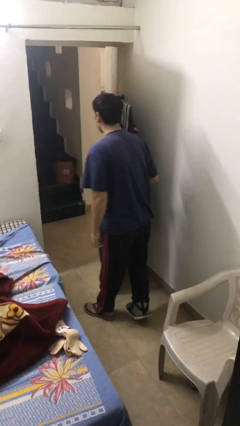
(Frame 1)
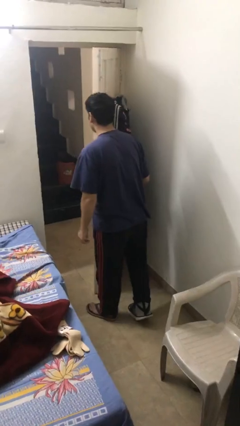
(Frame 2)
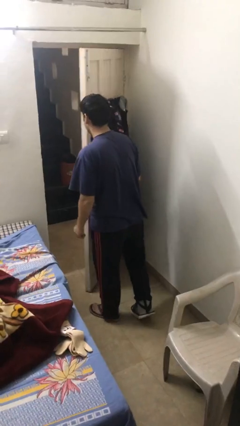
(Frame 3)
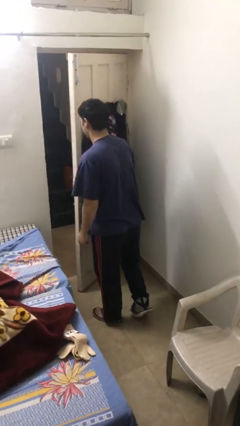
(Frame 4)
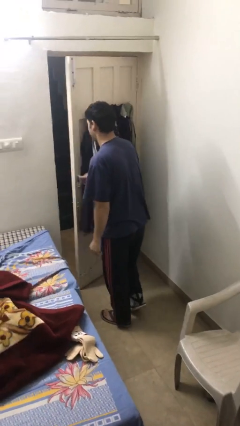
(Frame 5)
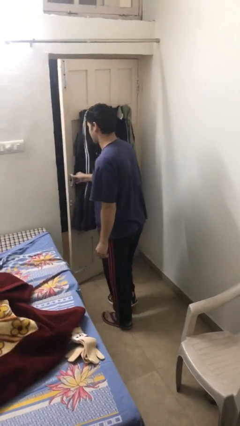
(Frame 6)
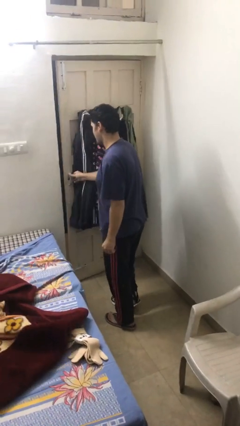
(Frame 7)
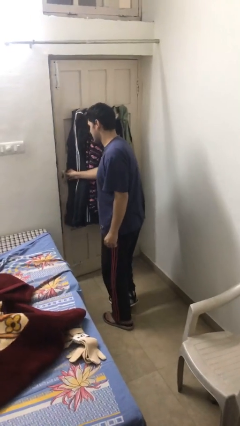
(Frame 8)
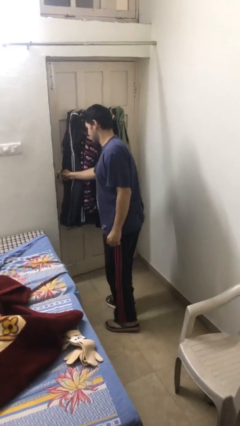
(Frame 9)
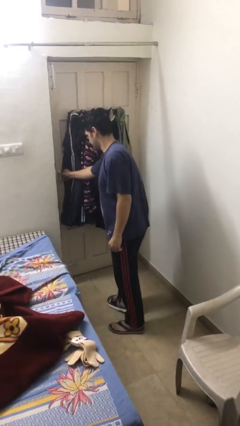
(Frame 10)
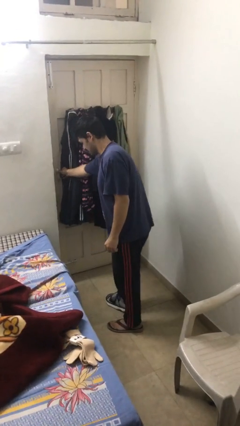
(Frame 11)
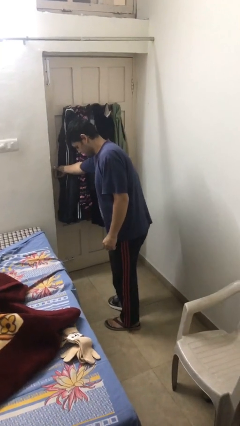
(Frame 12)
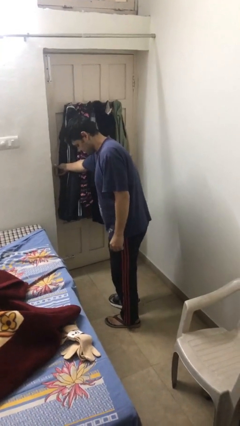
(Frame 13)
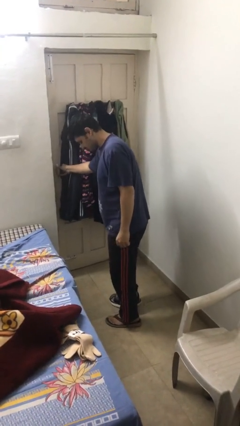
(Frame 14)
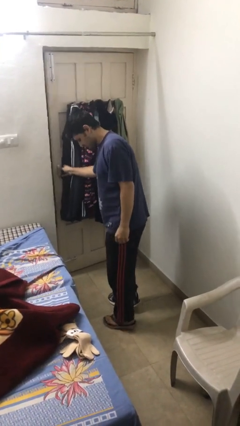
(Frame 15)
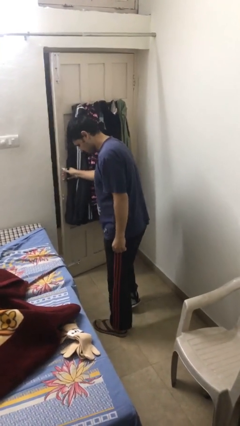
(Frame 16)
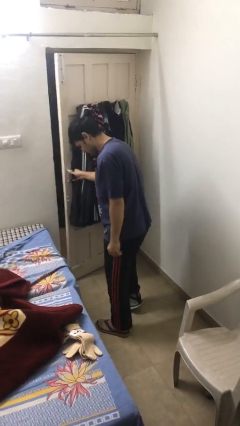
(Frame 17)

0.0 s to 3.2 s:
person closes facility door

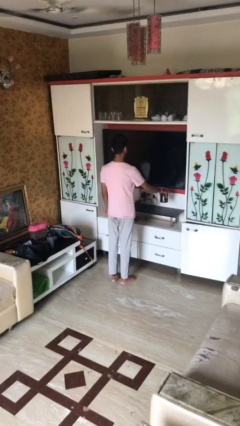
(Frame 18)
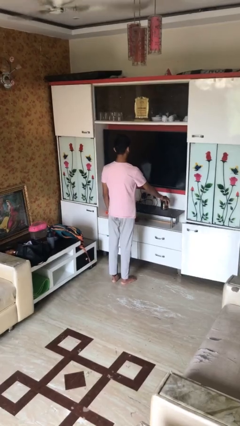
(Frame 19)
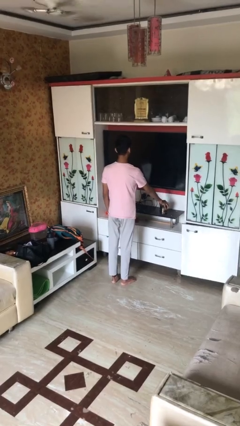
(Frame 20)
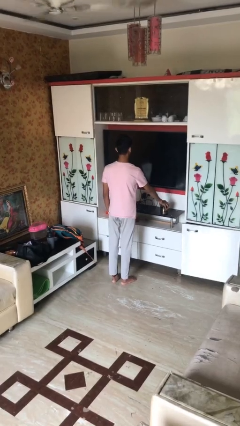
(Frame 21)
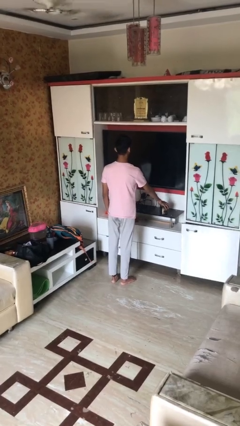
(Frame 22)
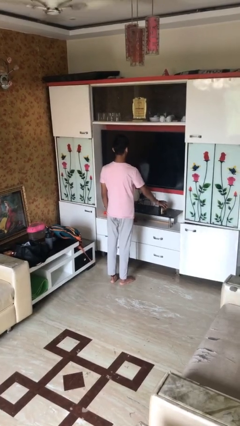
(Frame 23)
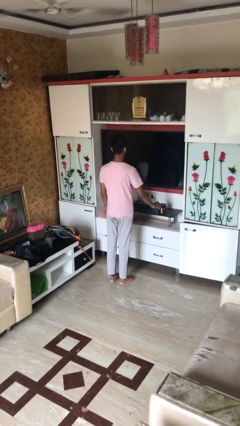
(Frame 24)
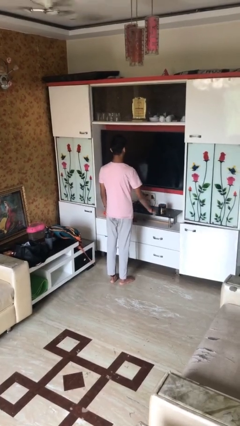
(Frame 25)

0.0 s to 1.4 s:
person puts down object on countertop

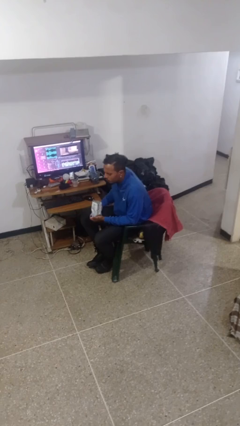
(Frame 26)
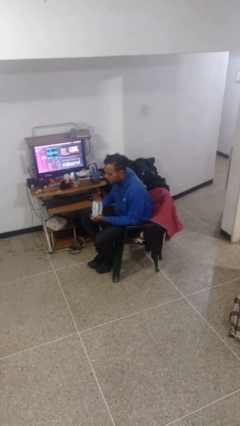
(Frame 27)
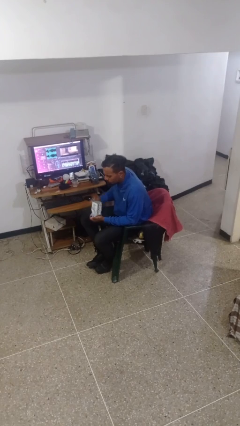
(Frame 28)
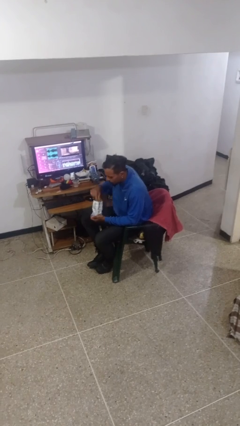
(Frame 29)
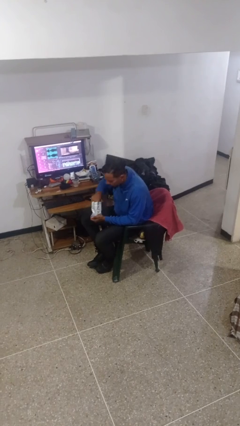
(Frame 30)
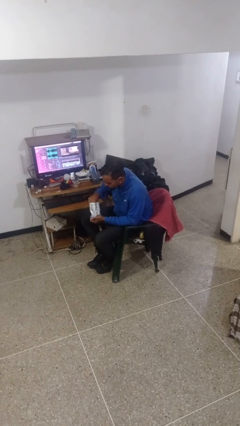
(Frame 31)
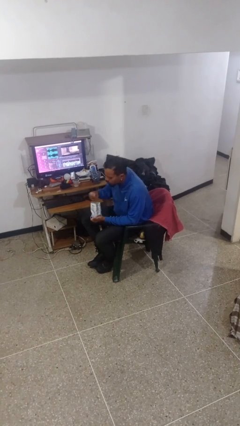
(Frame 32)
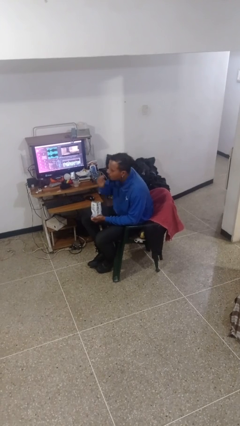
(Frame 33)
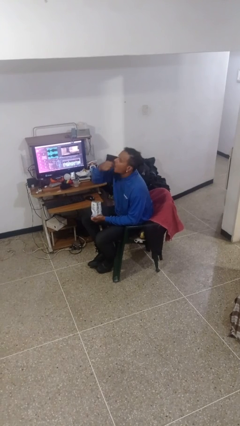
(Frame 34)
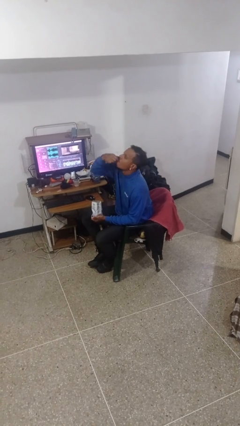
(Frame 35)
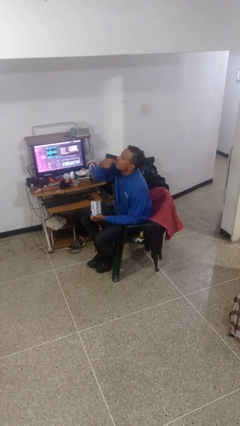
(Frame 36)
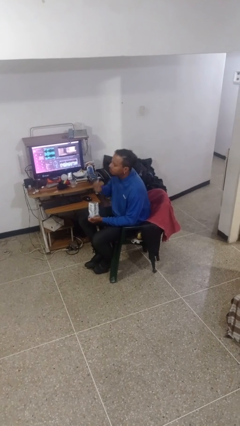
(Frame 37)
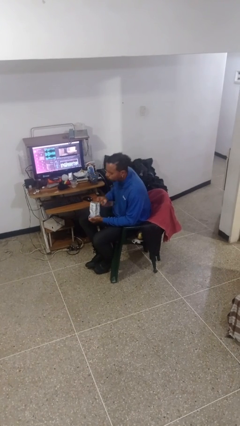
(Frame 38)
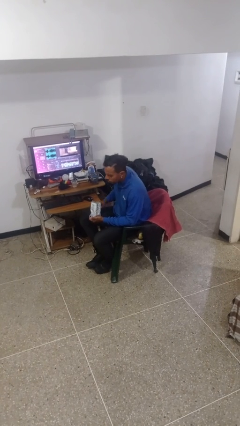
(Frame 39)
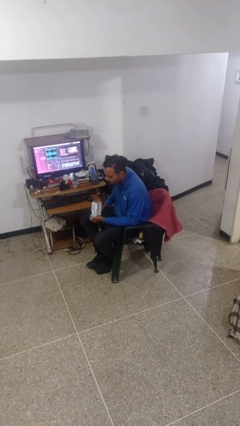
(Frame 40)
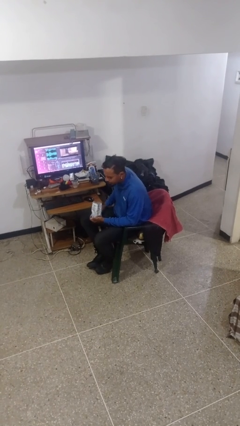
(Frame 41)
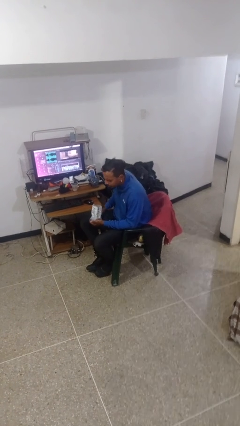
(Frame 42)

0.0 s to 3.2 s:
person eats snack from bag

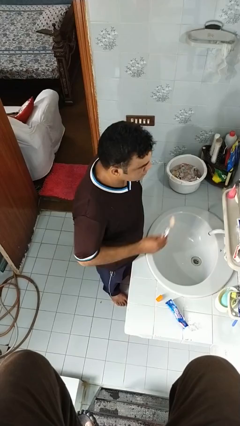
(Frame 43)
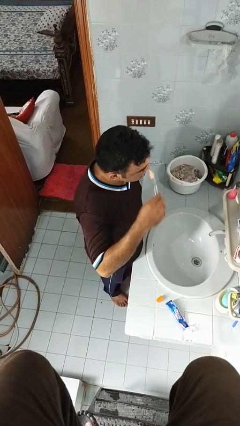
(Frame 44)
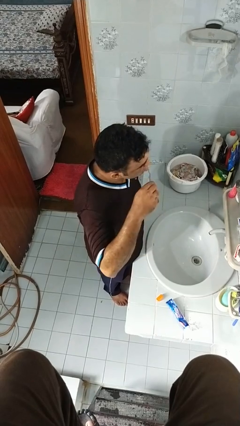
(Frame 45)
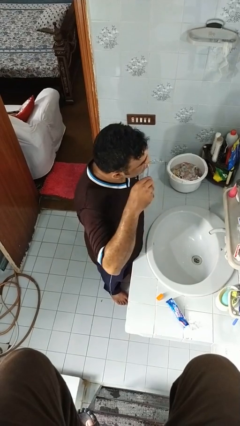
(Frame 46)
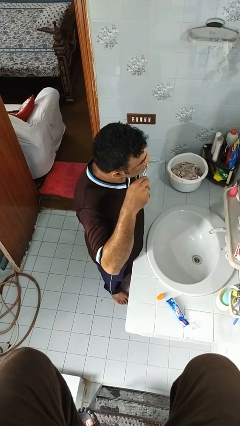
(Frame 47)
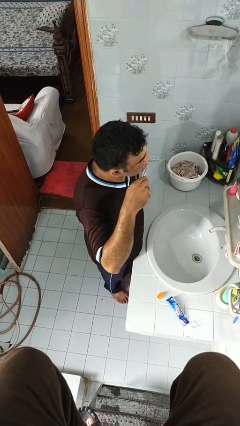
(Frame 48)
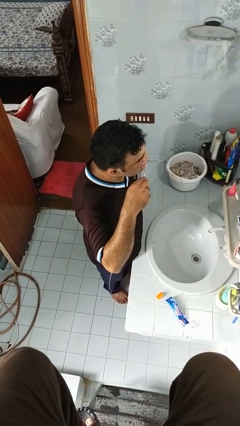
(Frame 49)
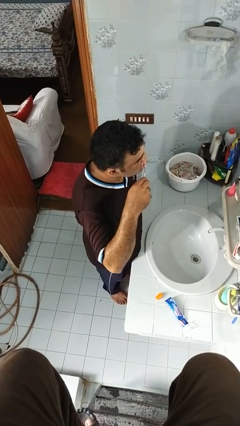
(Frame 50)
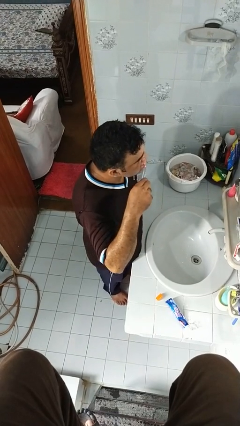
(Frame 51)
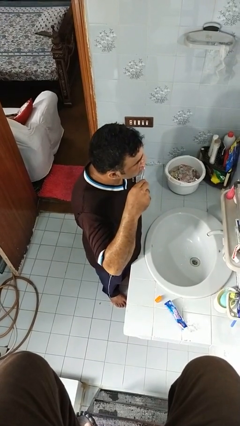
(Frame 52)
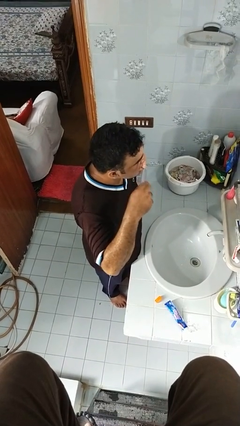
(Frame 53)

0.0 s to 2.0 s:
person brushes teeth

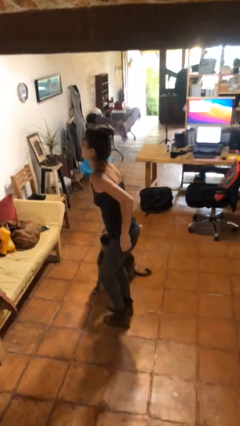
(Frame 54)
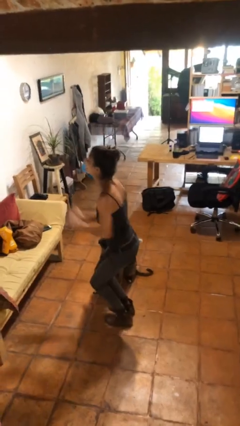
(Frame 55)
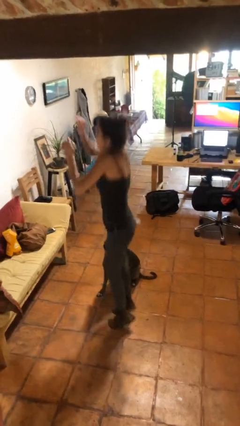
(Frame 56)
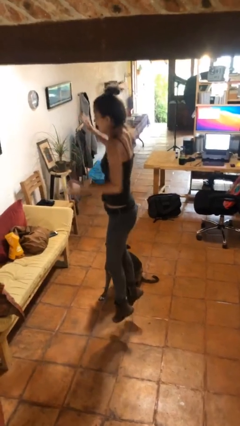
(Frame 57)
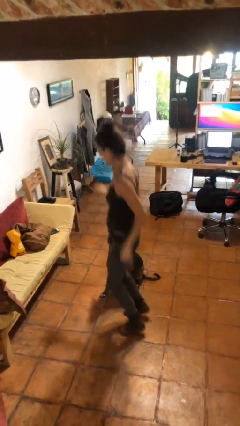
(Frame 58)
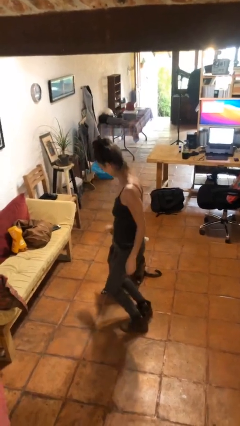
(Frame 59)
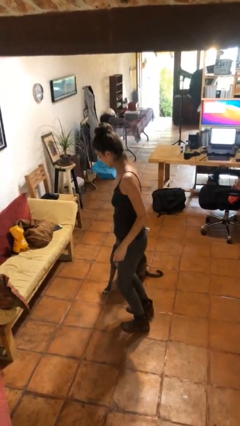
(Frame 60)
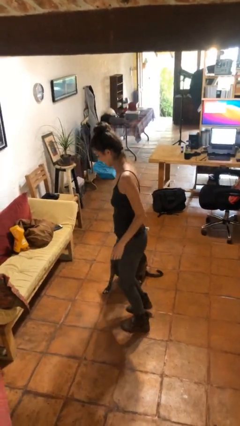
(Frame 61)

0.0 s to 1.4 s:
person jumps

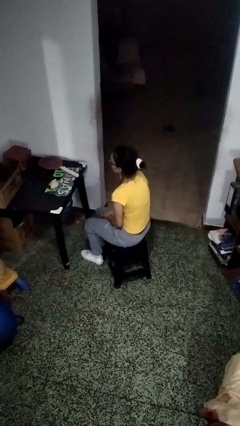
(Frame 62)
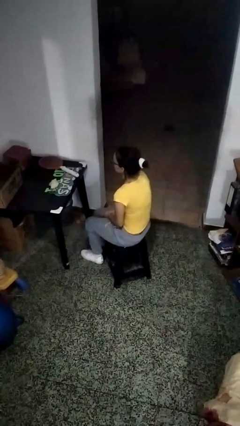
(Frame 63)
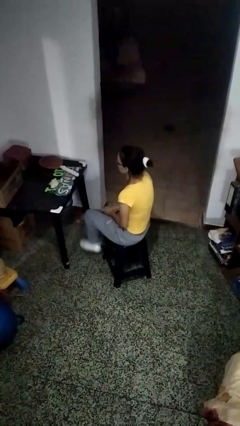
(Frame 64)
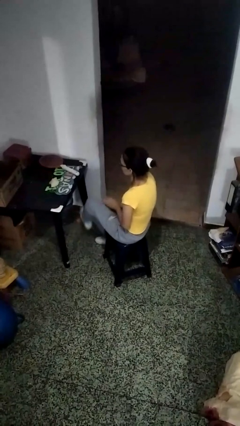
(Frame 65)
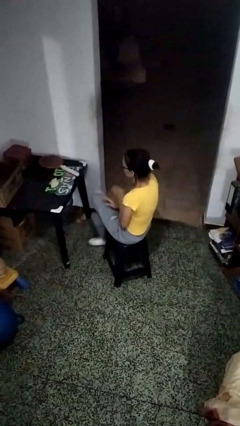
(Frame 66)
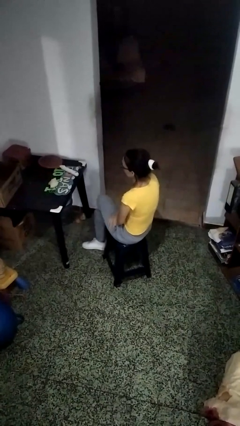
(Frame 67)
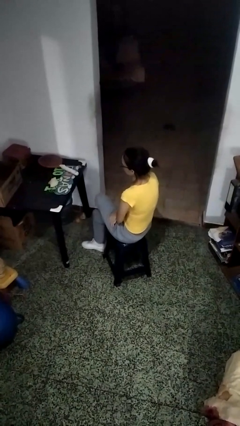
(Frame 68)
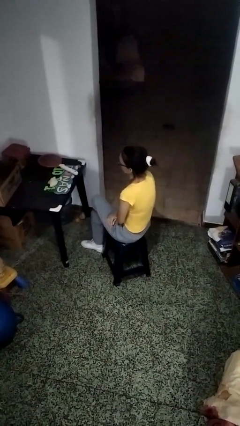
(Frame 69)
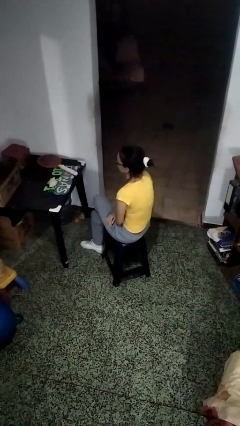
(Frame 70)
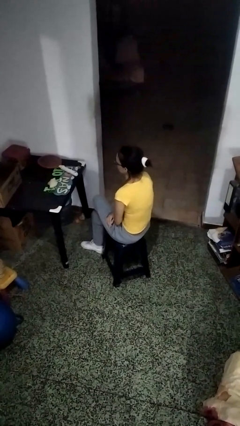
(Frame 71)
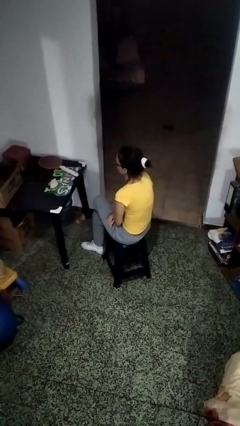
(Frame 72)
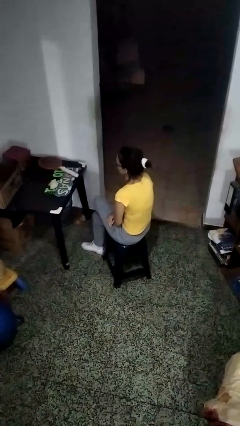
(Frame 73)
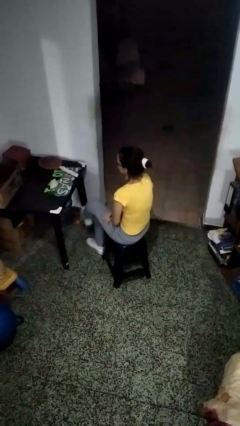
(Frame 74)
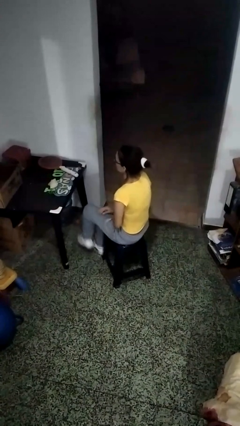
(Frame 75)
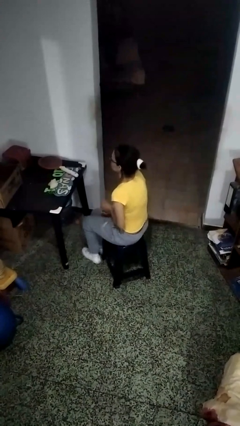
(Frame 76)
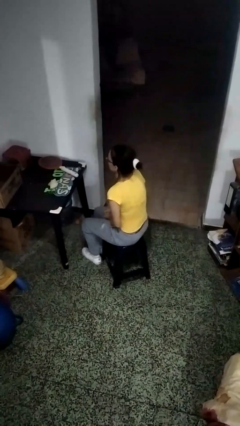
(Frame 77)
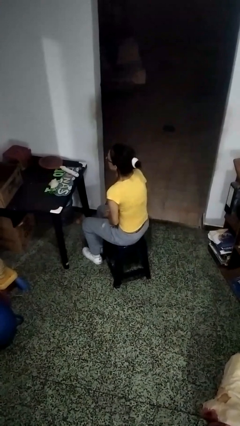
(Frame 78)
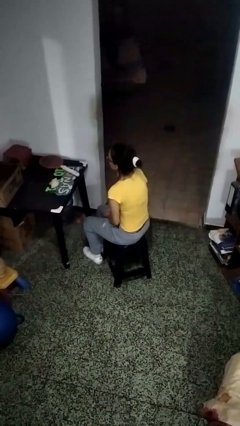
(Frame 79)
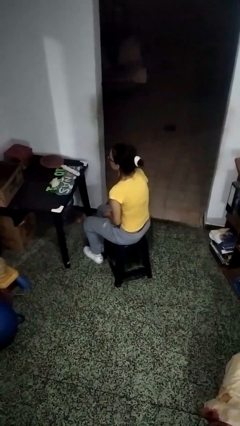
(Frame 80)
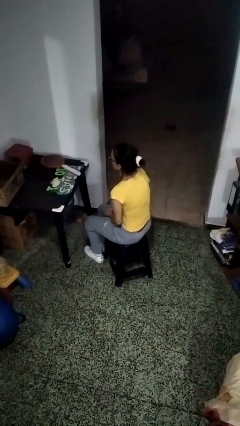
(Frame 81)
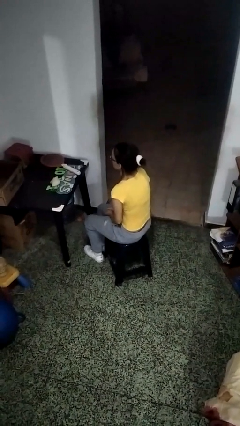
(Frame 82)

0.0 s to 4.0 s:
person crosses legs

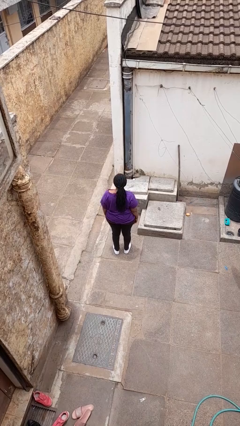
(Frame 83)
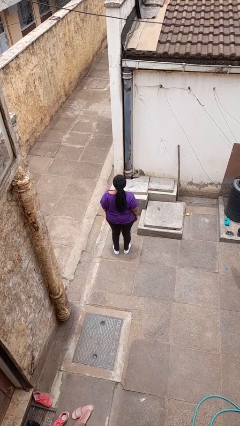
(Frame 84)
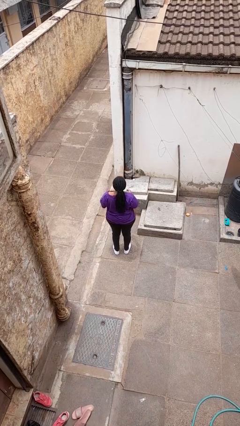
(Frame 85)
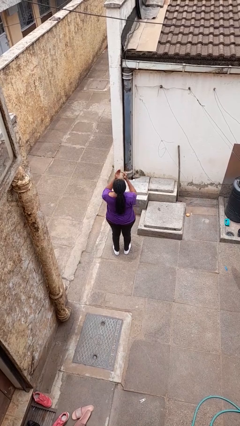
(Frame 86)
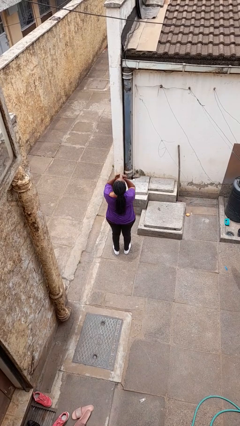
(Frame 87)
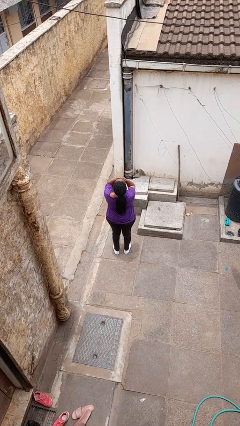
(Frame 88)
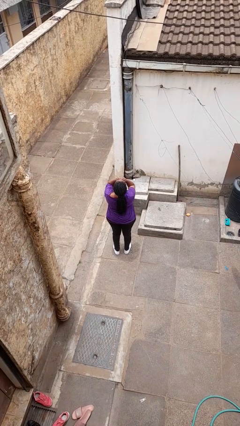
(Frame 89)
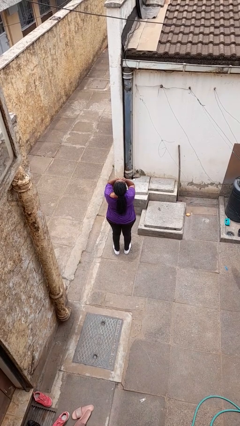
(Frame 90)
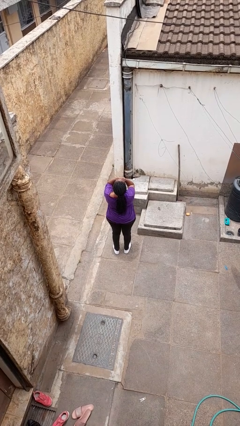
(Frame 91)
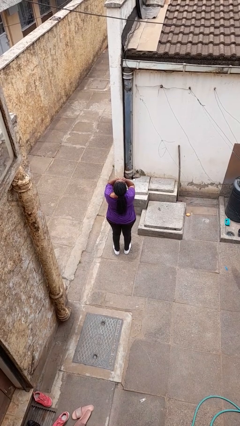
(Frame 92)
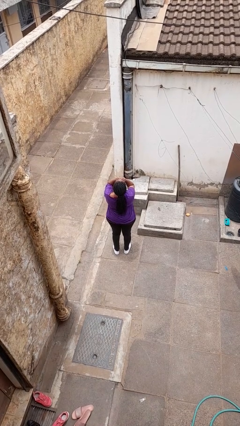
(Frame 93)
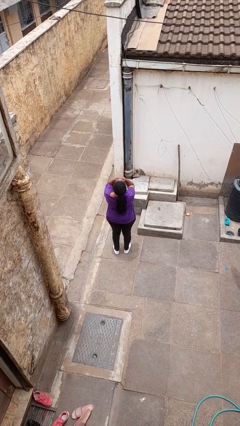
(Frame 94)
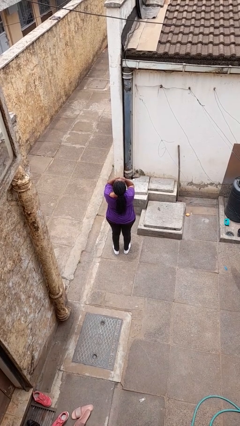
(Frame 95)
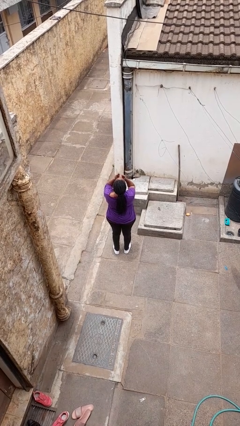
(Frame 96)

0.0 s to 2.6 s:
person covers face with hands
